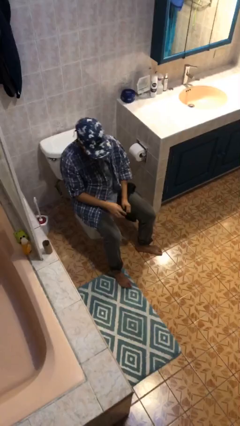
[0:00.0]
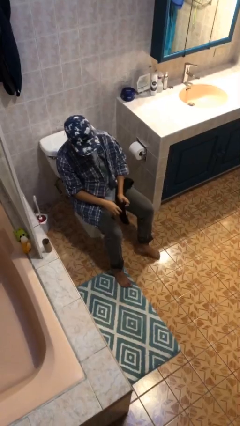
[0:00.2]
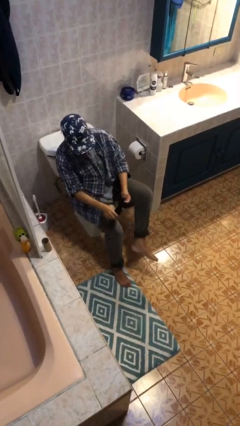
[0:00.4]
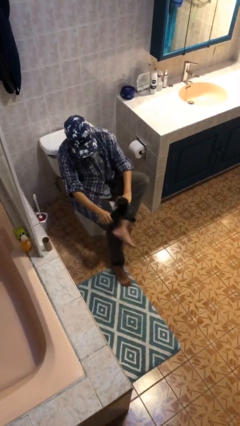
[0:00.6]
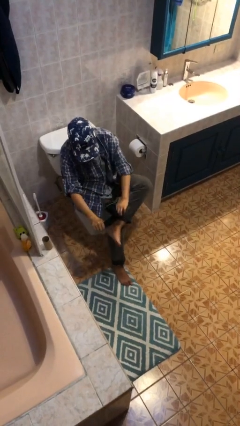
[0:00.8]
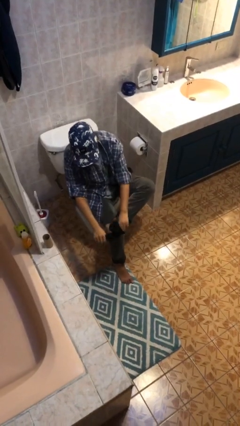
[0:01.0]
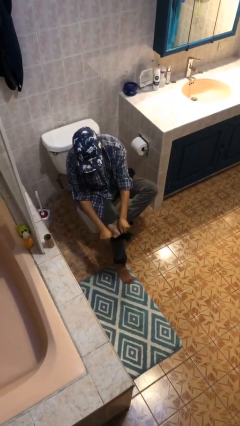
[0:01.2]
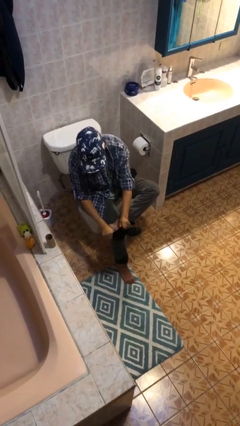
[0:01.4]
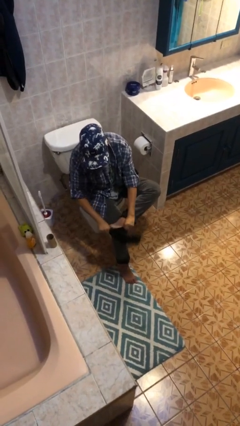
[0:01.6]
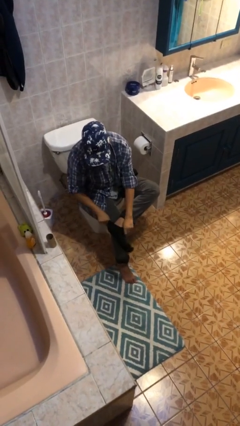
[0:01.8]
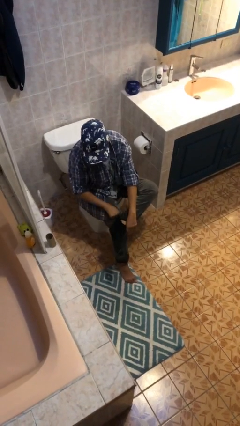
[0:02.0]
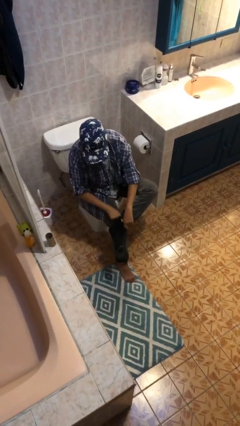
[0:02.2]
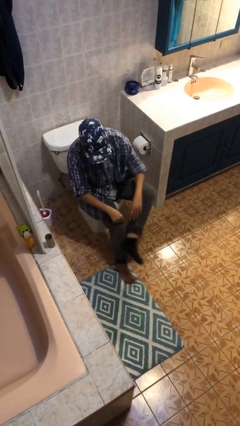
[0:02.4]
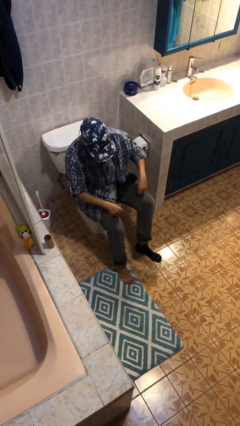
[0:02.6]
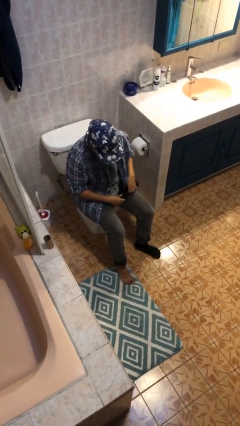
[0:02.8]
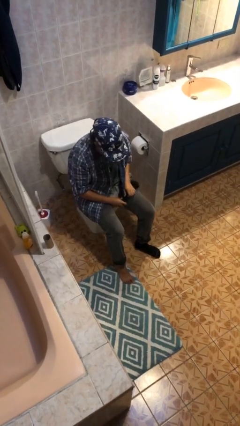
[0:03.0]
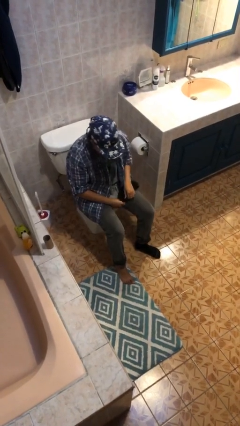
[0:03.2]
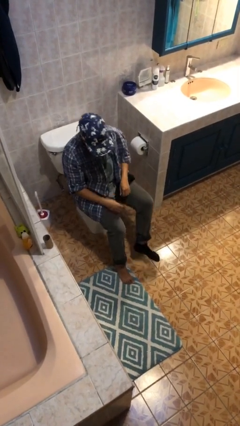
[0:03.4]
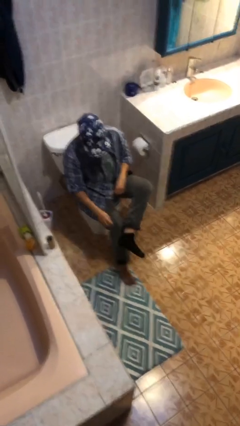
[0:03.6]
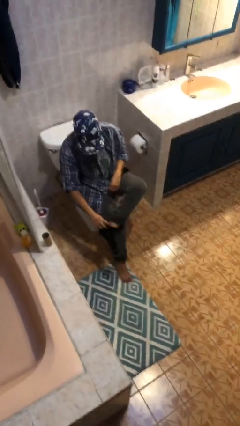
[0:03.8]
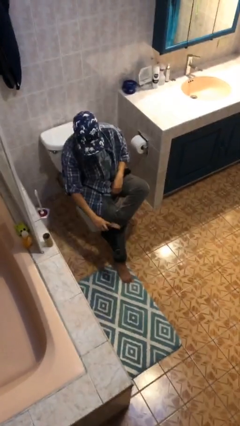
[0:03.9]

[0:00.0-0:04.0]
person puts on socks

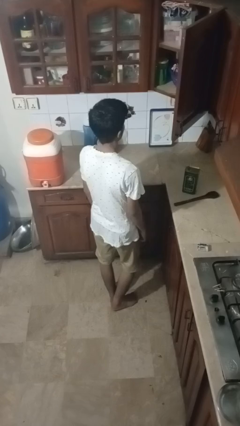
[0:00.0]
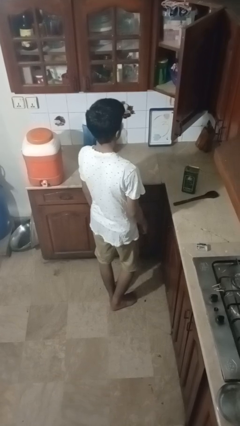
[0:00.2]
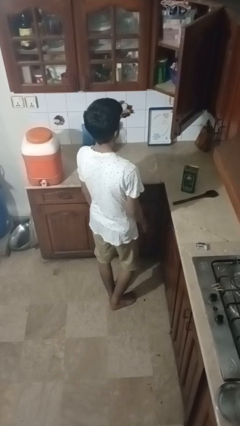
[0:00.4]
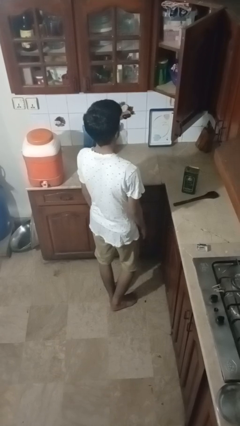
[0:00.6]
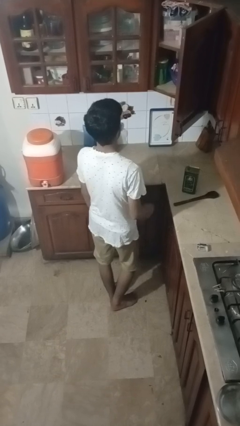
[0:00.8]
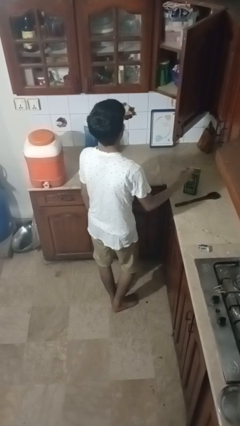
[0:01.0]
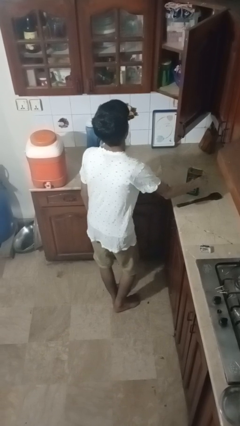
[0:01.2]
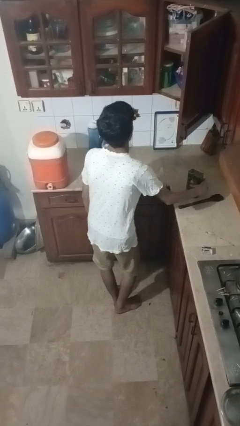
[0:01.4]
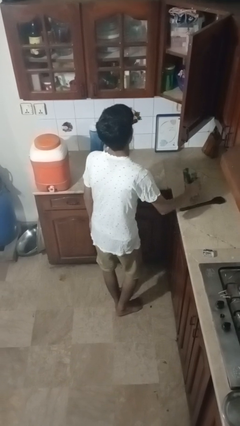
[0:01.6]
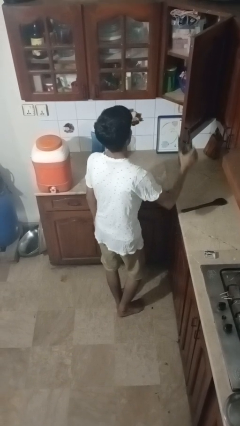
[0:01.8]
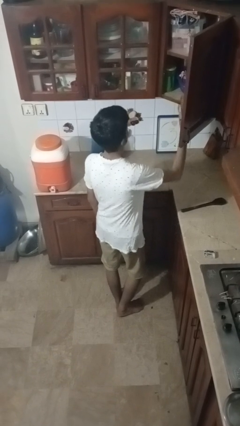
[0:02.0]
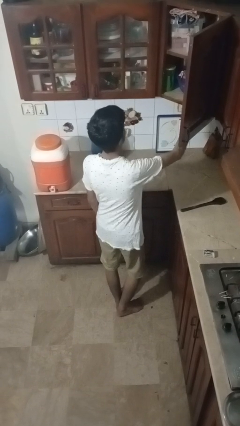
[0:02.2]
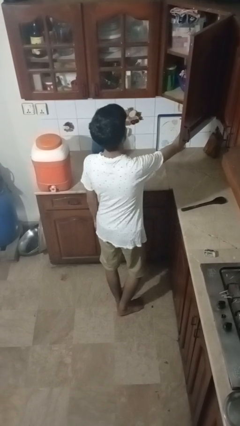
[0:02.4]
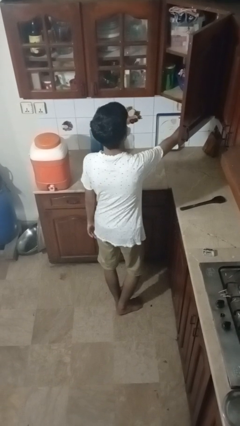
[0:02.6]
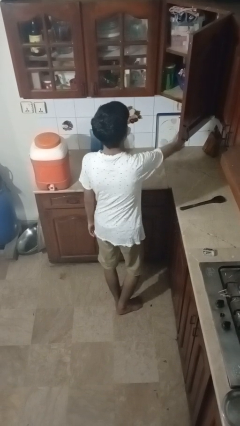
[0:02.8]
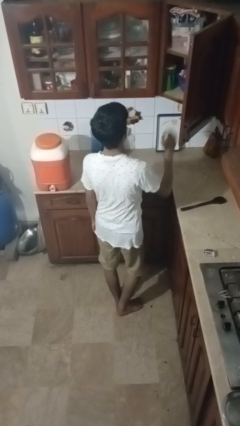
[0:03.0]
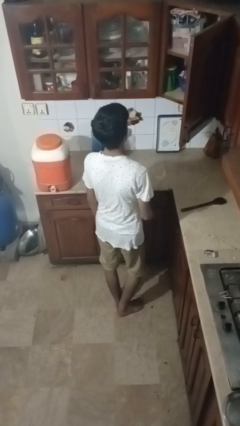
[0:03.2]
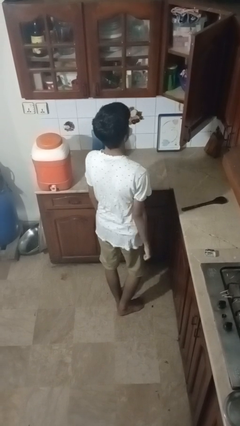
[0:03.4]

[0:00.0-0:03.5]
person puts object in cabinet

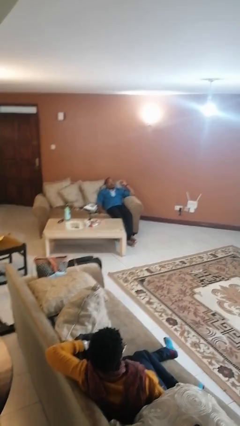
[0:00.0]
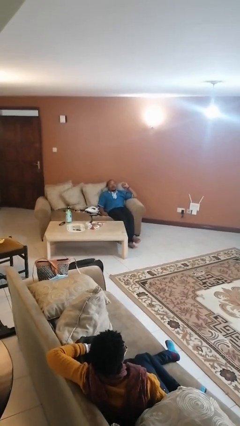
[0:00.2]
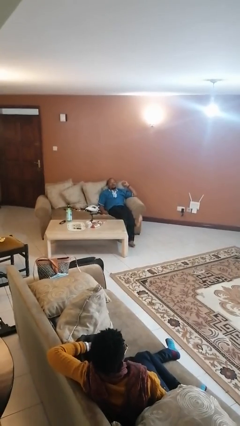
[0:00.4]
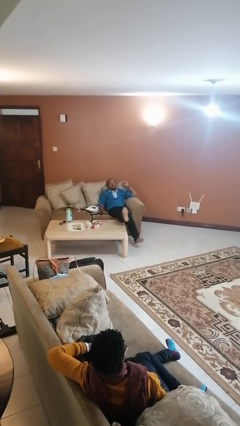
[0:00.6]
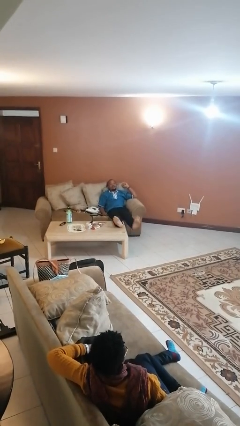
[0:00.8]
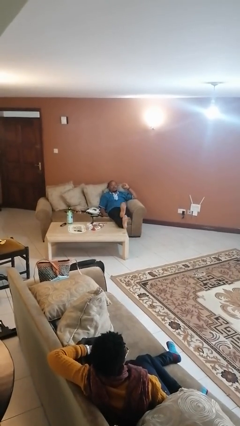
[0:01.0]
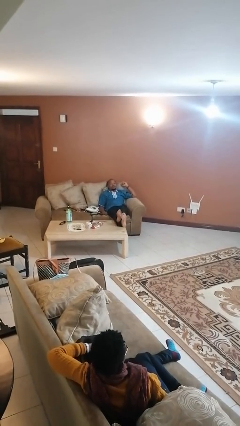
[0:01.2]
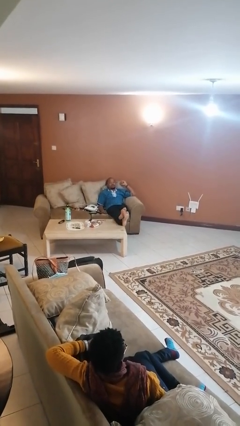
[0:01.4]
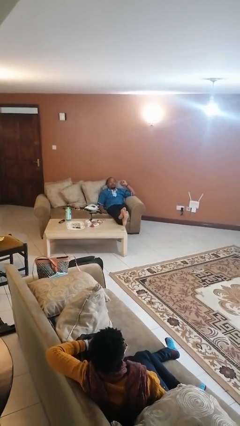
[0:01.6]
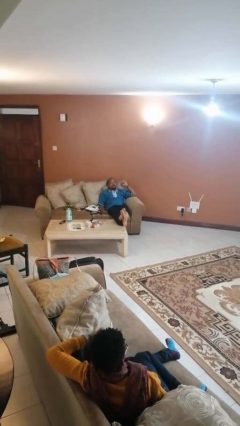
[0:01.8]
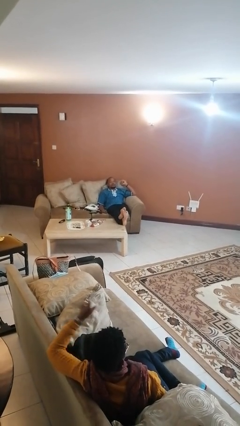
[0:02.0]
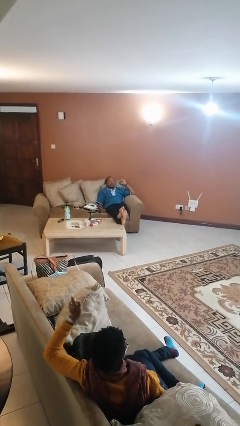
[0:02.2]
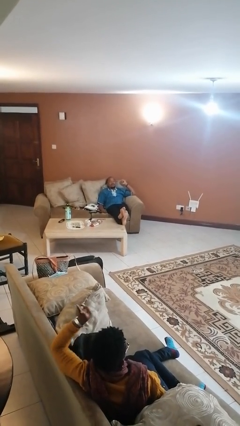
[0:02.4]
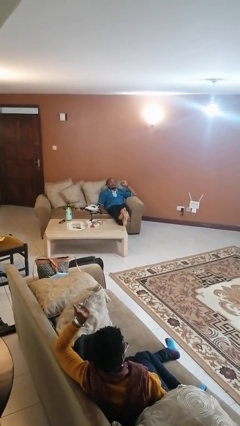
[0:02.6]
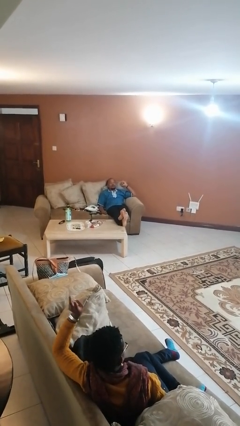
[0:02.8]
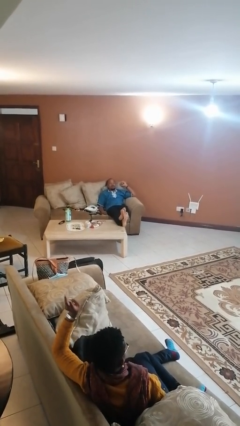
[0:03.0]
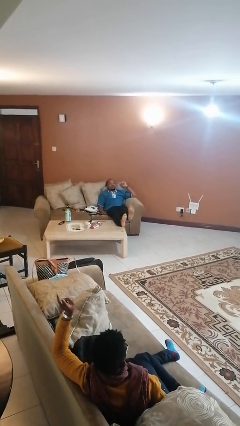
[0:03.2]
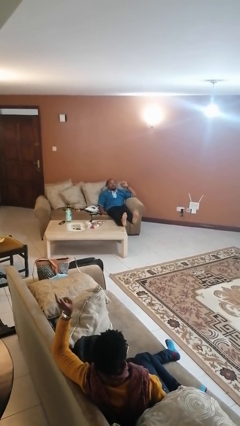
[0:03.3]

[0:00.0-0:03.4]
person puts feet up

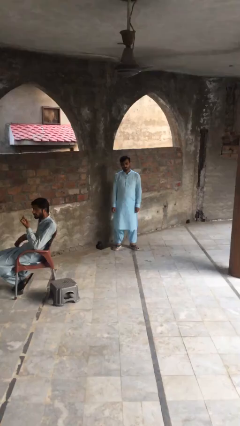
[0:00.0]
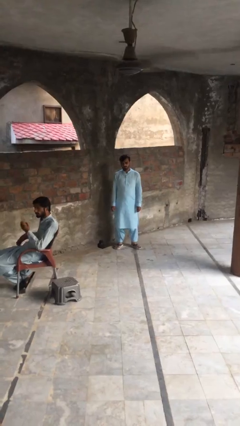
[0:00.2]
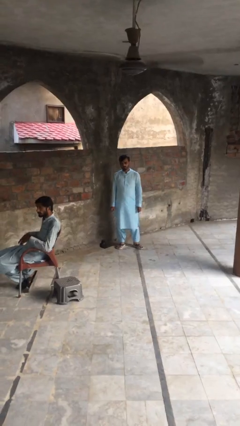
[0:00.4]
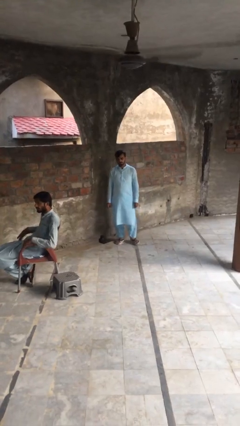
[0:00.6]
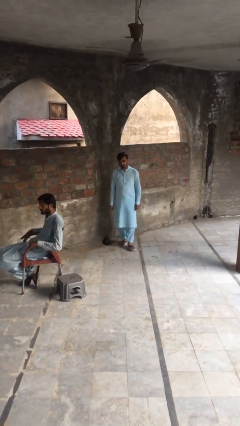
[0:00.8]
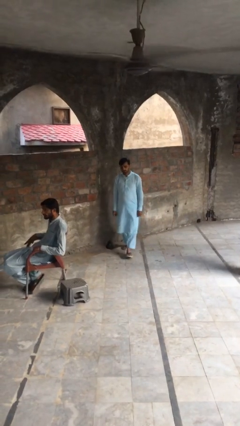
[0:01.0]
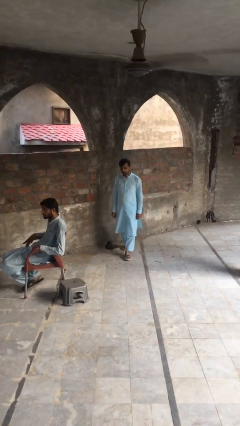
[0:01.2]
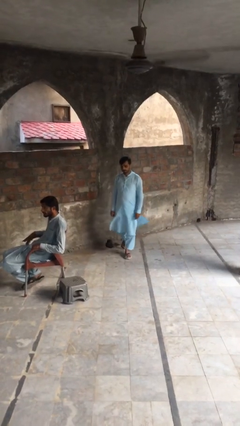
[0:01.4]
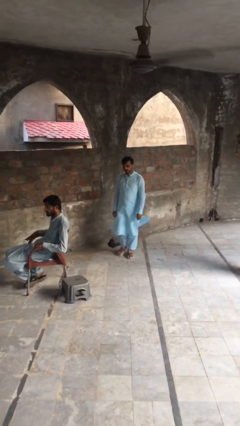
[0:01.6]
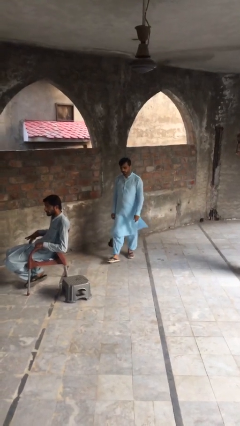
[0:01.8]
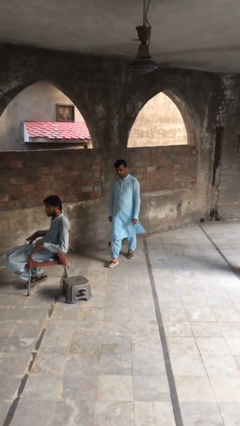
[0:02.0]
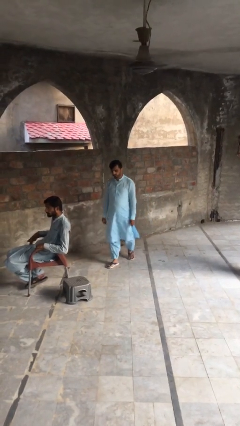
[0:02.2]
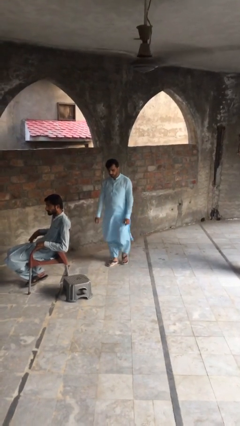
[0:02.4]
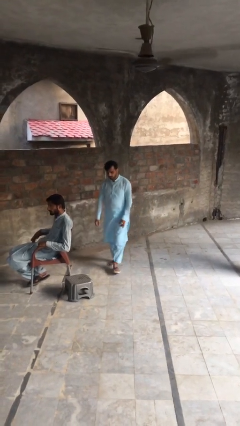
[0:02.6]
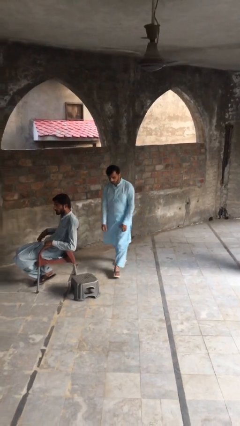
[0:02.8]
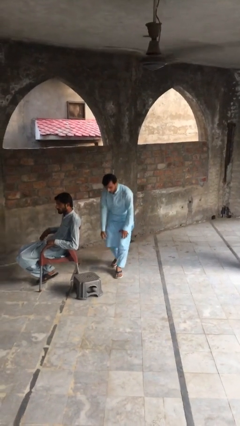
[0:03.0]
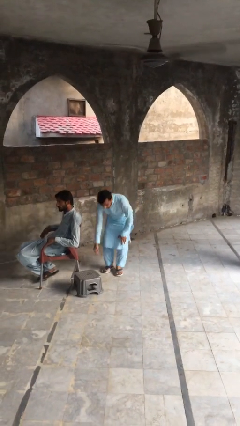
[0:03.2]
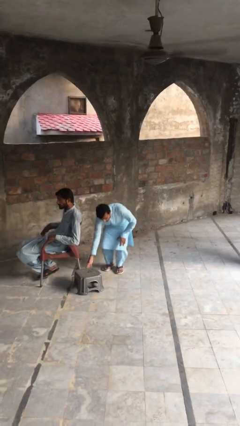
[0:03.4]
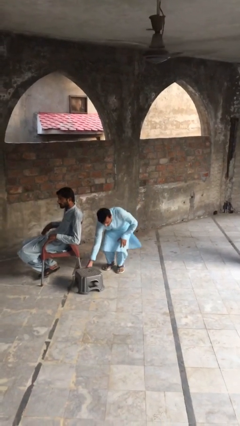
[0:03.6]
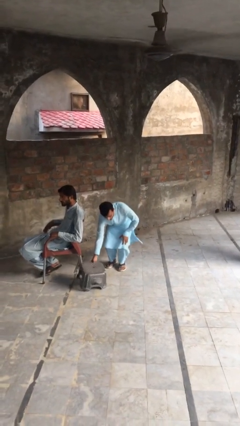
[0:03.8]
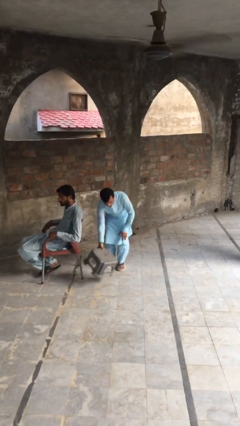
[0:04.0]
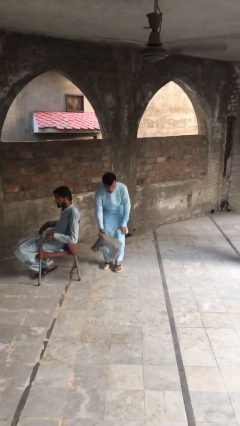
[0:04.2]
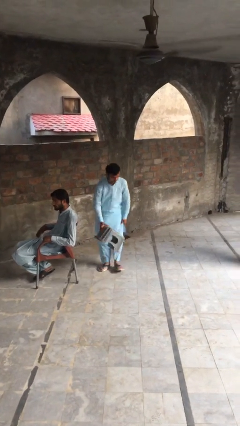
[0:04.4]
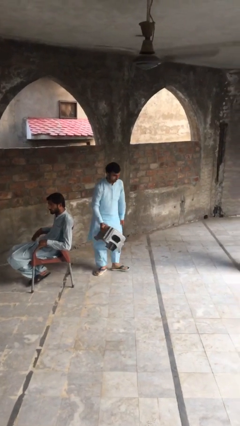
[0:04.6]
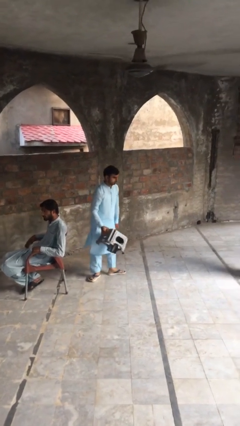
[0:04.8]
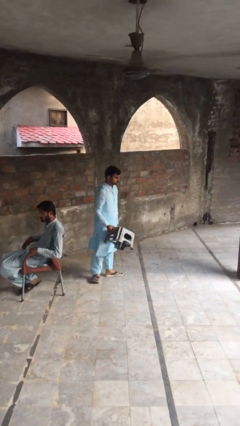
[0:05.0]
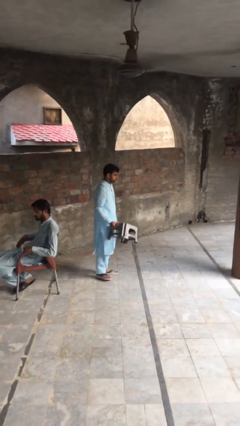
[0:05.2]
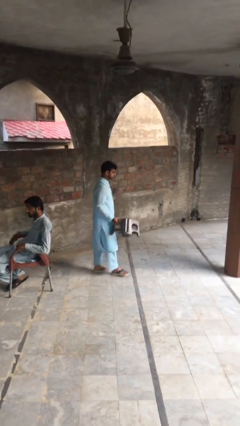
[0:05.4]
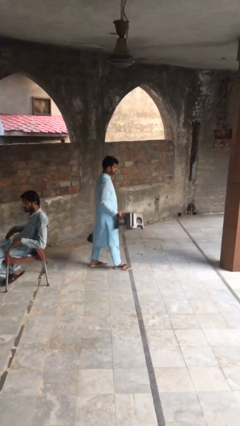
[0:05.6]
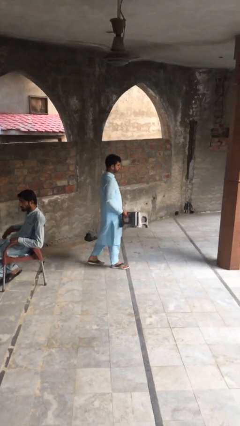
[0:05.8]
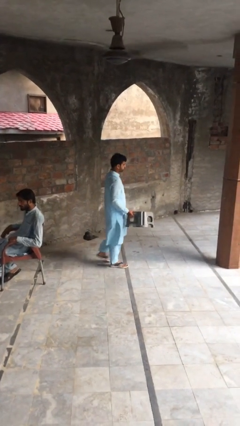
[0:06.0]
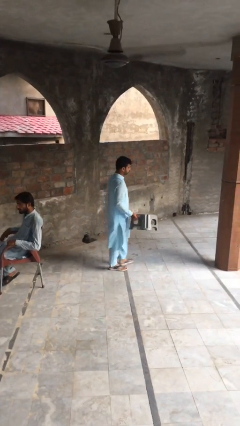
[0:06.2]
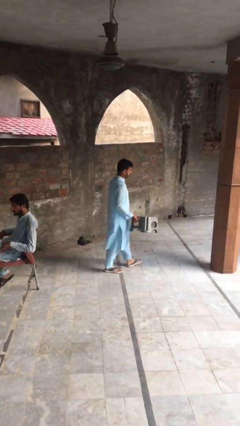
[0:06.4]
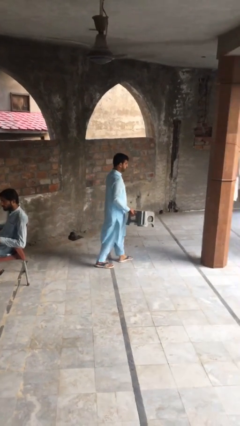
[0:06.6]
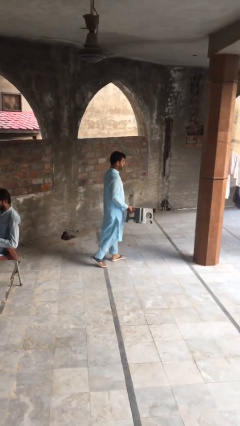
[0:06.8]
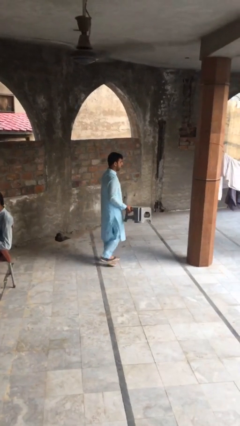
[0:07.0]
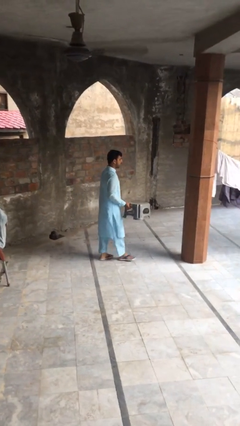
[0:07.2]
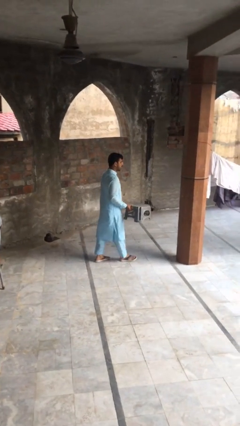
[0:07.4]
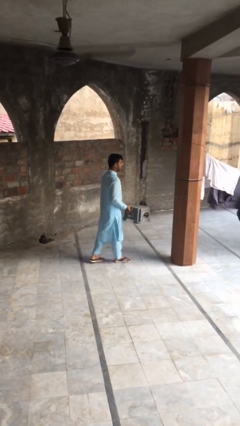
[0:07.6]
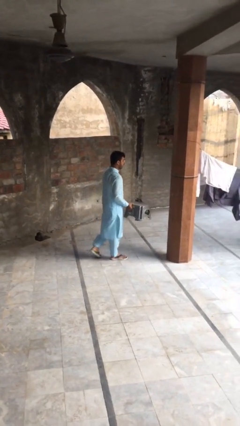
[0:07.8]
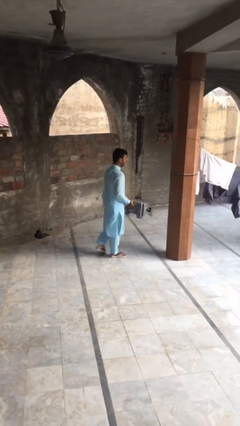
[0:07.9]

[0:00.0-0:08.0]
person steals object from person
